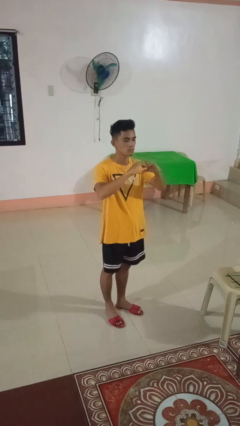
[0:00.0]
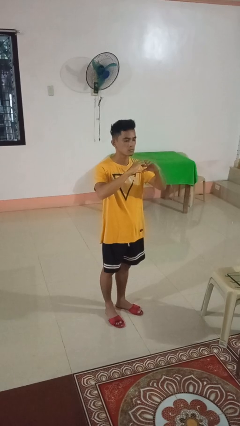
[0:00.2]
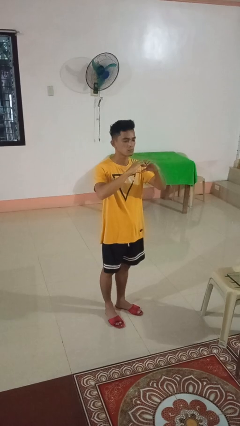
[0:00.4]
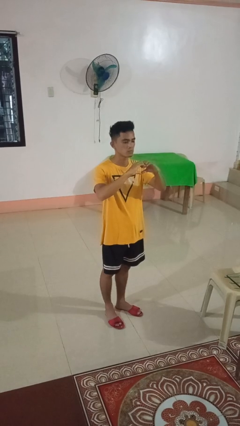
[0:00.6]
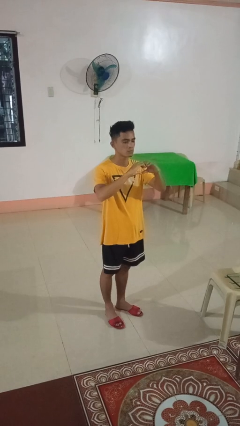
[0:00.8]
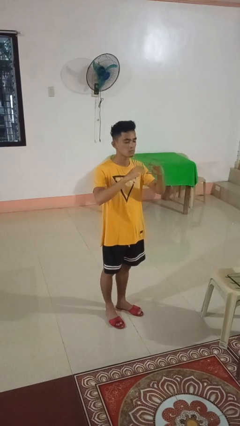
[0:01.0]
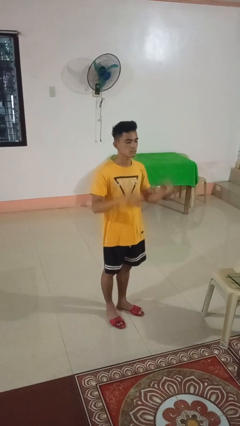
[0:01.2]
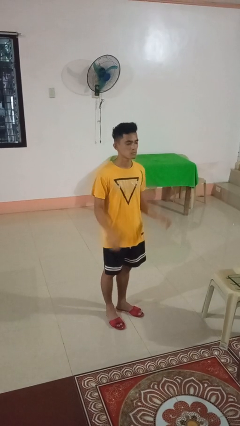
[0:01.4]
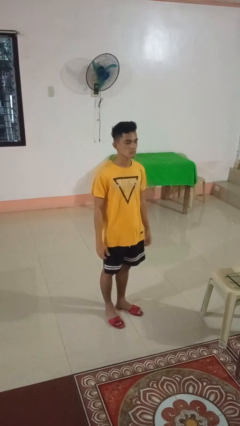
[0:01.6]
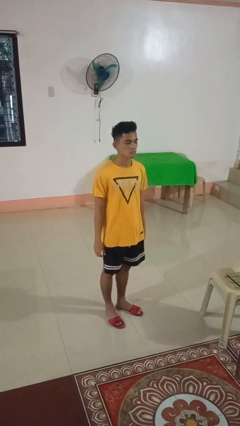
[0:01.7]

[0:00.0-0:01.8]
person gestures heart

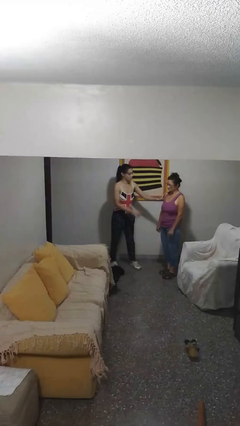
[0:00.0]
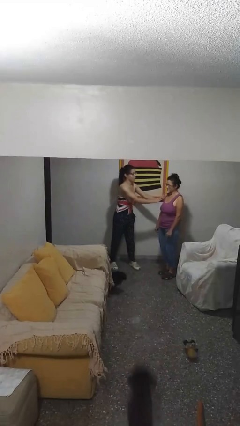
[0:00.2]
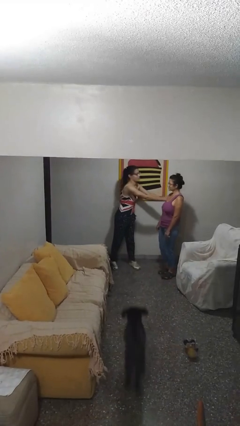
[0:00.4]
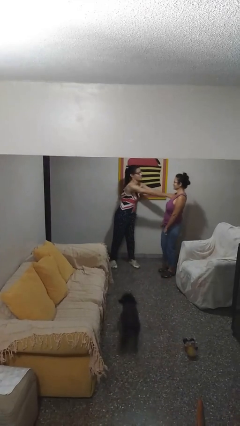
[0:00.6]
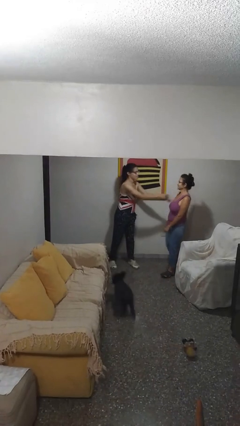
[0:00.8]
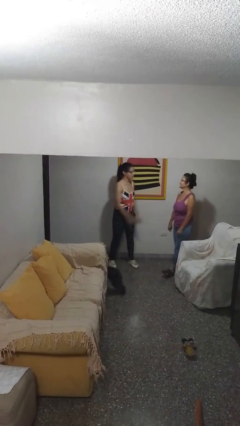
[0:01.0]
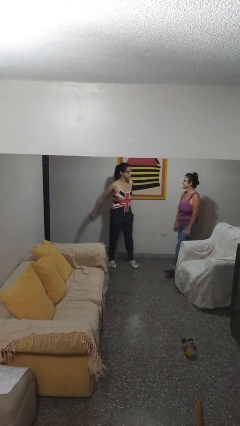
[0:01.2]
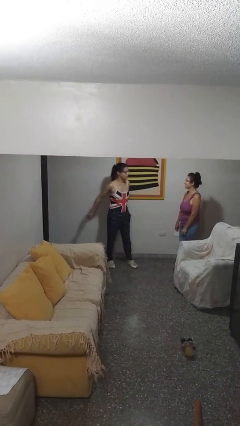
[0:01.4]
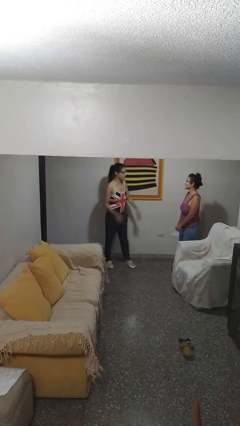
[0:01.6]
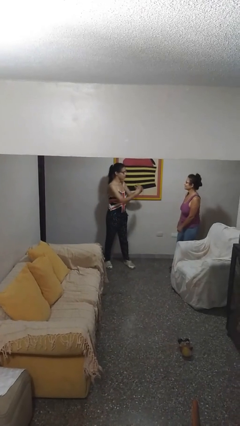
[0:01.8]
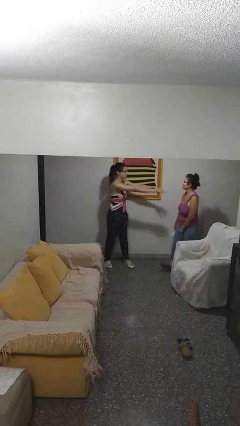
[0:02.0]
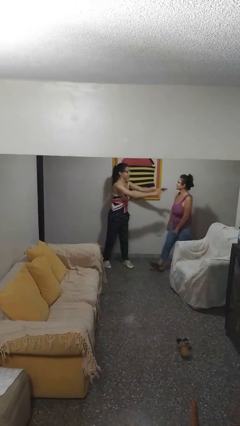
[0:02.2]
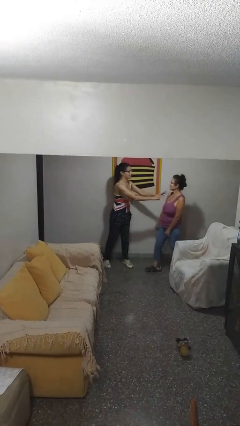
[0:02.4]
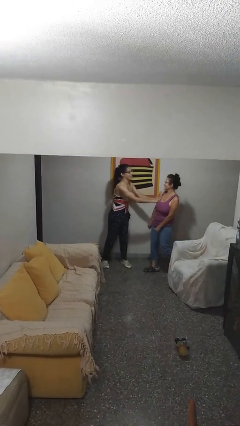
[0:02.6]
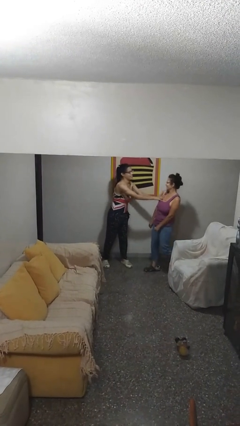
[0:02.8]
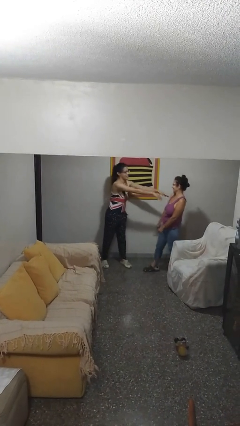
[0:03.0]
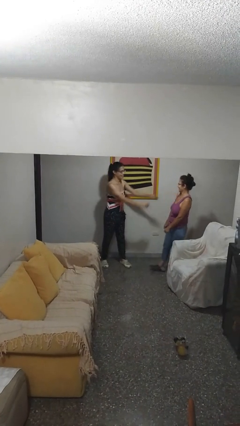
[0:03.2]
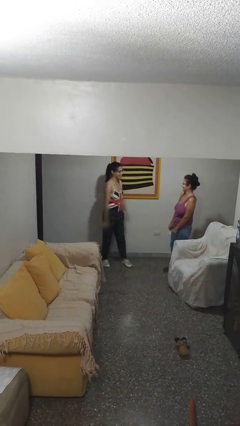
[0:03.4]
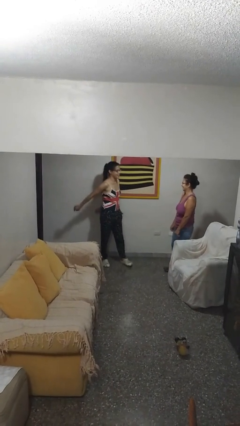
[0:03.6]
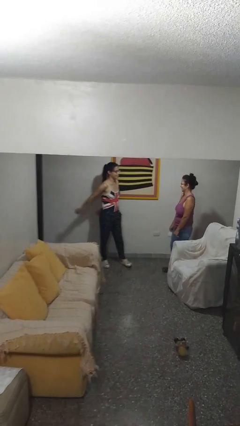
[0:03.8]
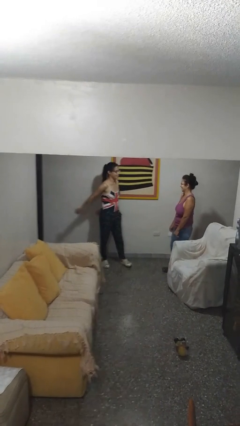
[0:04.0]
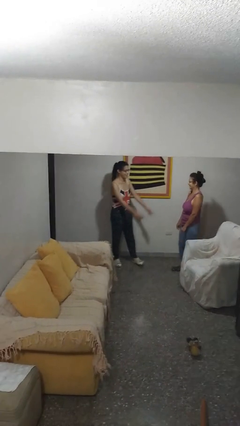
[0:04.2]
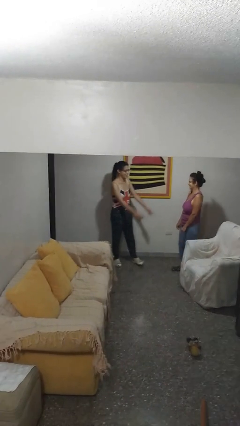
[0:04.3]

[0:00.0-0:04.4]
person shoves person

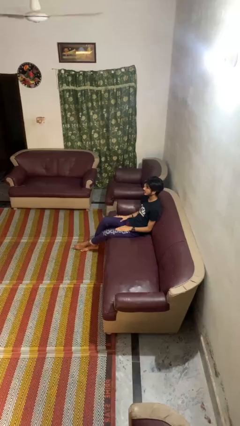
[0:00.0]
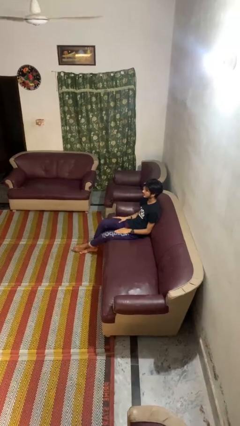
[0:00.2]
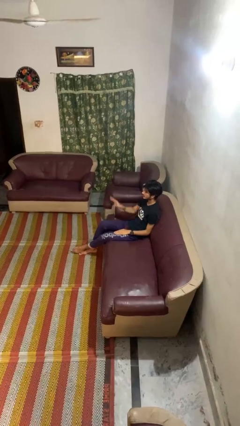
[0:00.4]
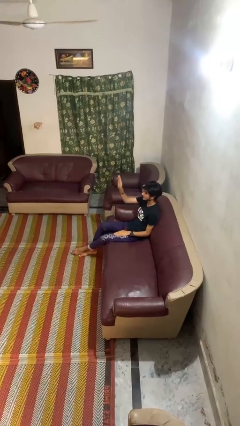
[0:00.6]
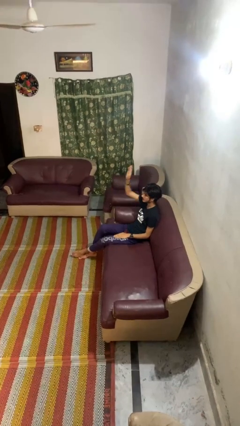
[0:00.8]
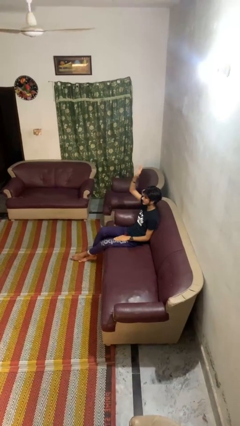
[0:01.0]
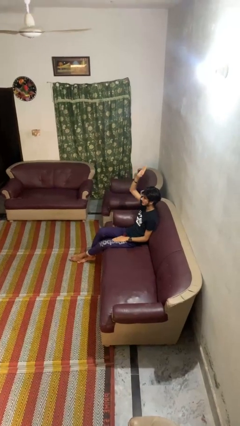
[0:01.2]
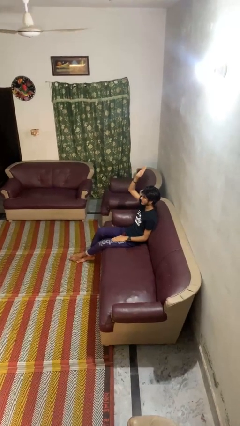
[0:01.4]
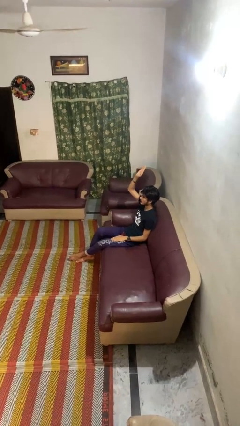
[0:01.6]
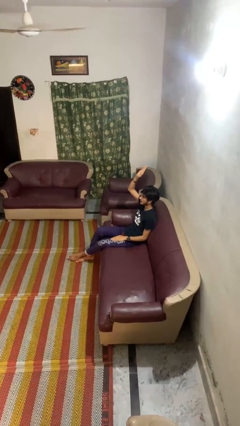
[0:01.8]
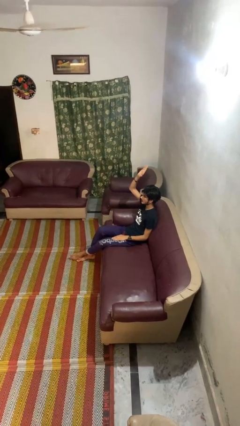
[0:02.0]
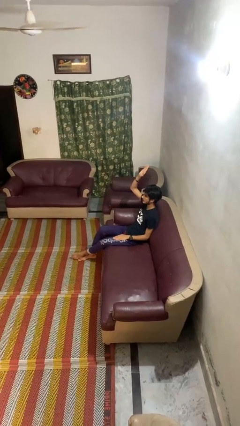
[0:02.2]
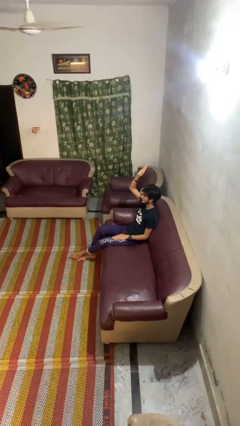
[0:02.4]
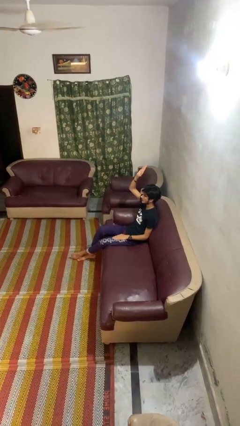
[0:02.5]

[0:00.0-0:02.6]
person gestures raise hand

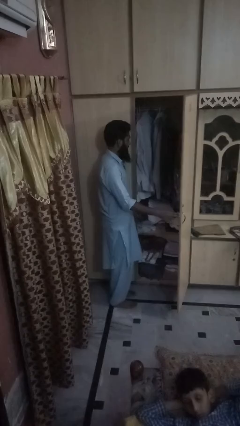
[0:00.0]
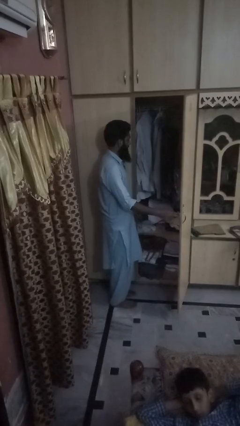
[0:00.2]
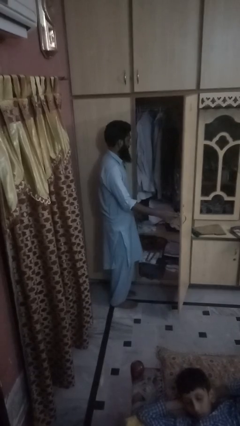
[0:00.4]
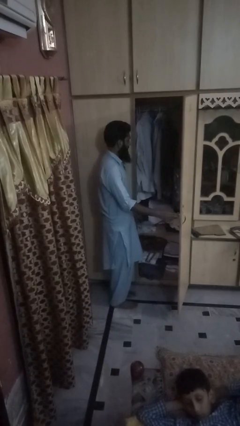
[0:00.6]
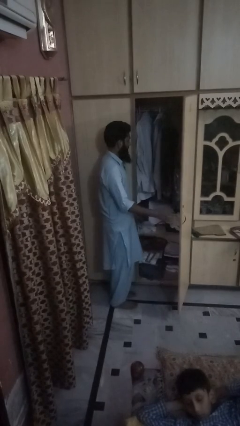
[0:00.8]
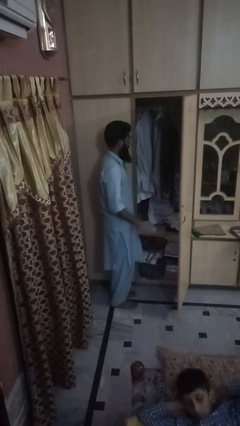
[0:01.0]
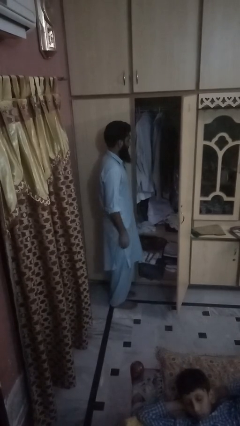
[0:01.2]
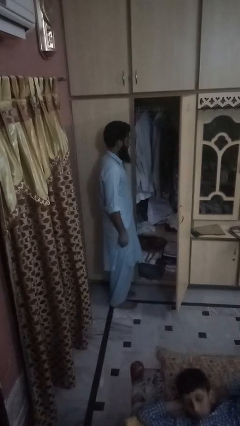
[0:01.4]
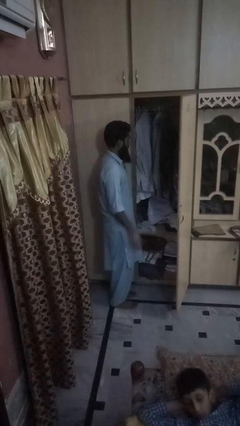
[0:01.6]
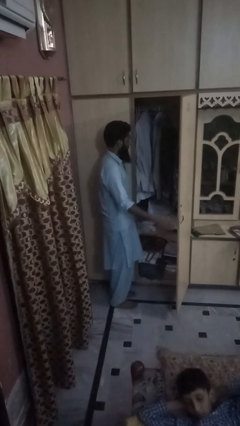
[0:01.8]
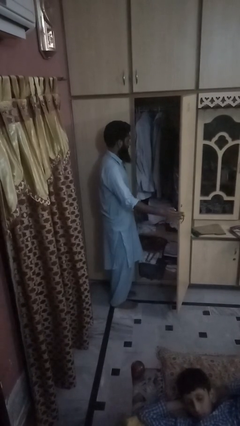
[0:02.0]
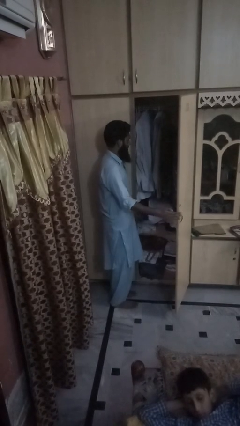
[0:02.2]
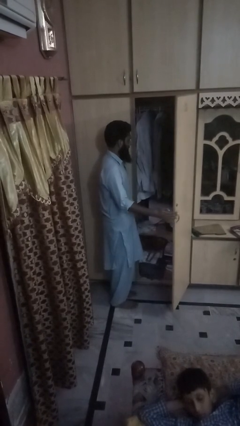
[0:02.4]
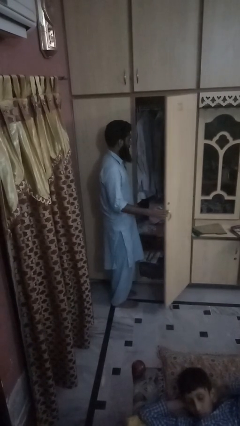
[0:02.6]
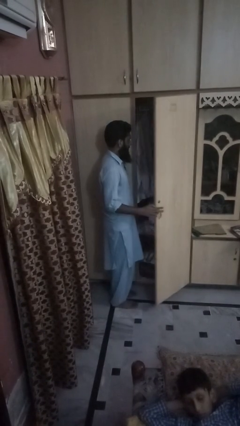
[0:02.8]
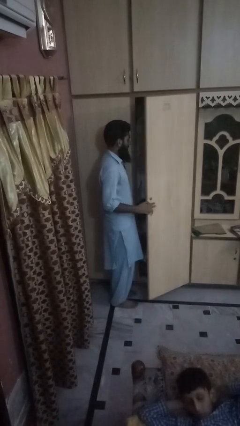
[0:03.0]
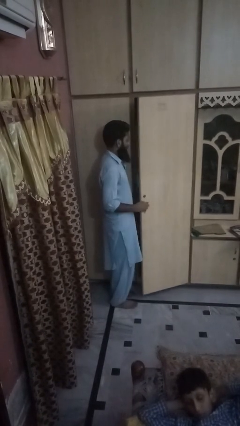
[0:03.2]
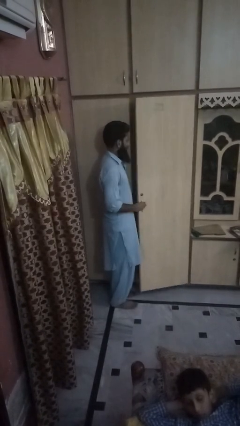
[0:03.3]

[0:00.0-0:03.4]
person closes dresser drawer

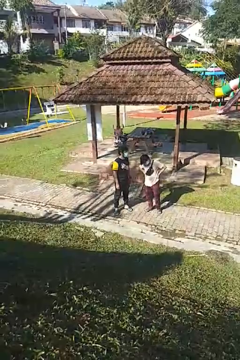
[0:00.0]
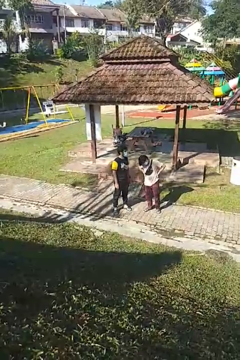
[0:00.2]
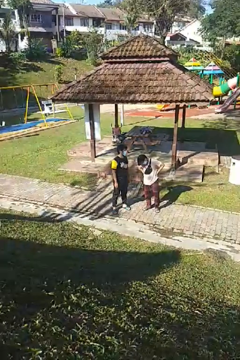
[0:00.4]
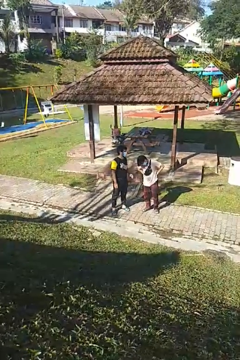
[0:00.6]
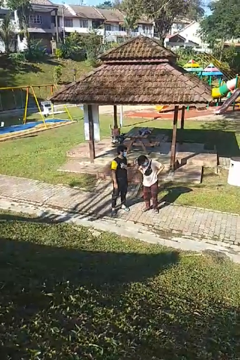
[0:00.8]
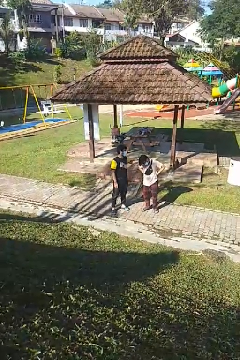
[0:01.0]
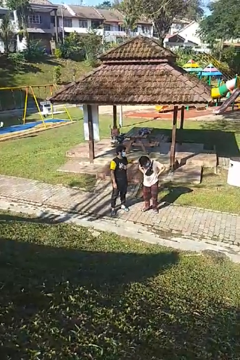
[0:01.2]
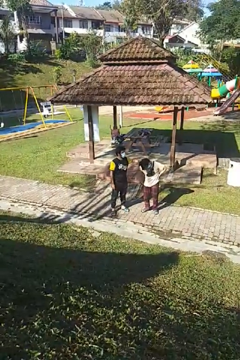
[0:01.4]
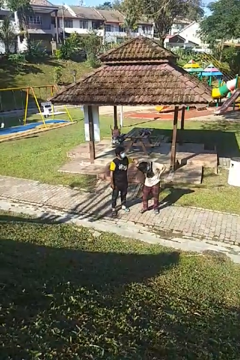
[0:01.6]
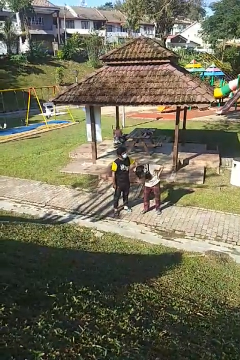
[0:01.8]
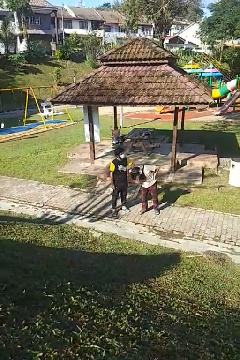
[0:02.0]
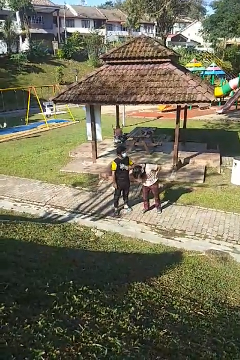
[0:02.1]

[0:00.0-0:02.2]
person grabs person by hair

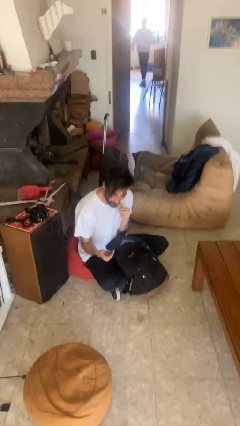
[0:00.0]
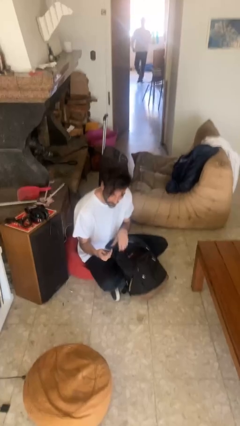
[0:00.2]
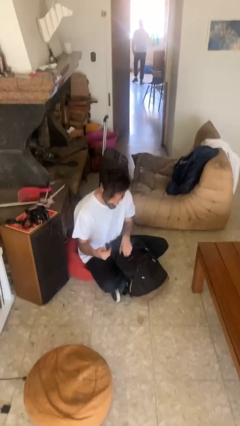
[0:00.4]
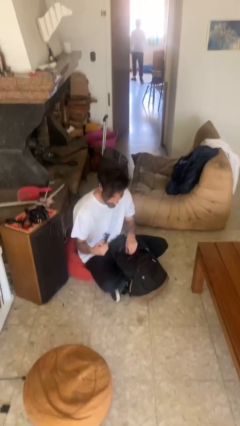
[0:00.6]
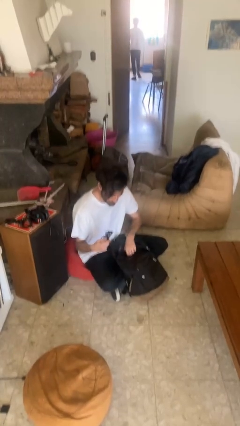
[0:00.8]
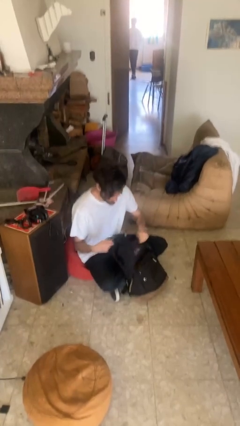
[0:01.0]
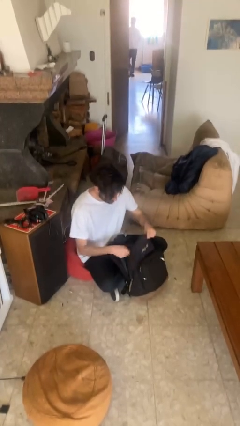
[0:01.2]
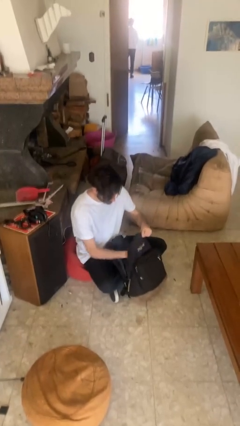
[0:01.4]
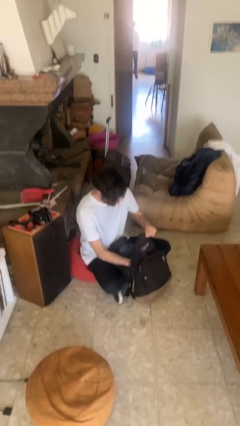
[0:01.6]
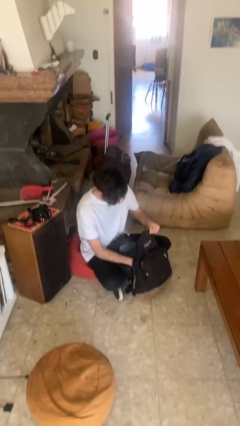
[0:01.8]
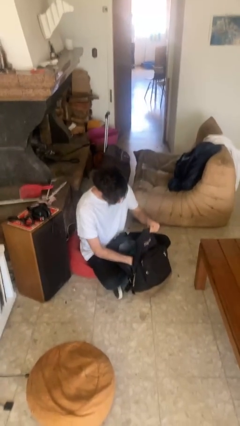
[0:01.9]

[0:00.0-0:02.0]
person puts object into backpack

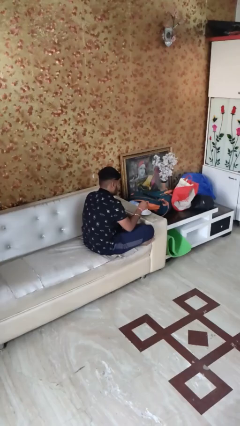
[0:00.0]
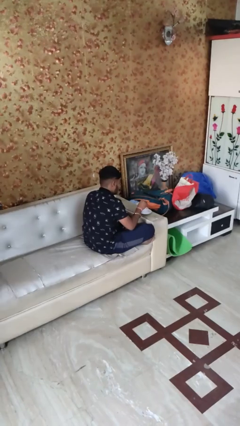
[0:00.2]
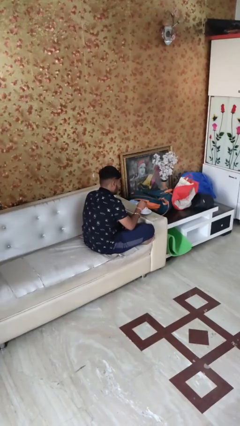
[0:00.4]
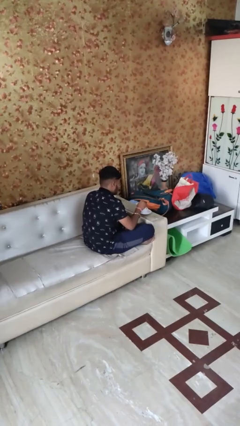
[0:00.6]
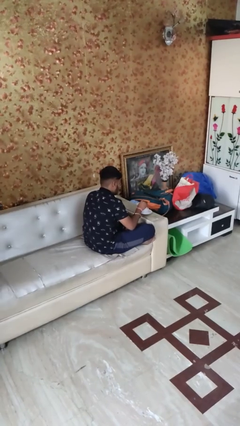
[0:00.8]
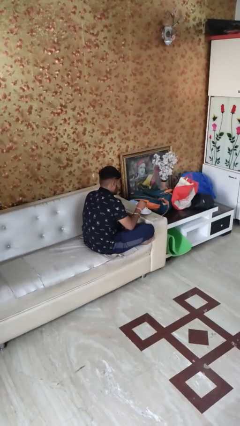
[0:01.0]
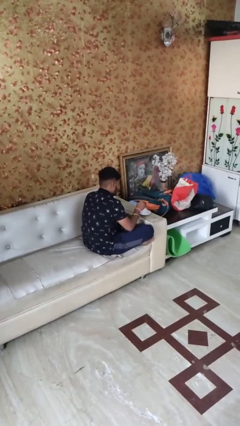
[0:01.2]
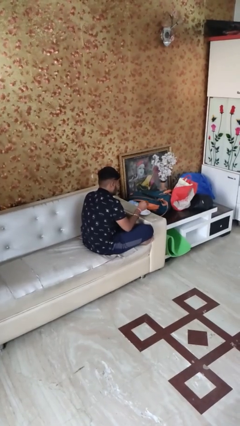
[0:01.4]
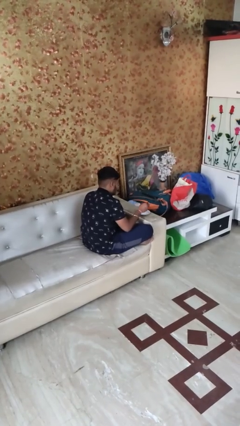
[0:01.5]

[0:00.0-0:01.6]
person stirs mug
